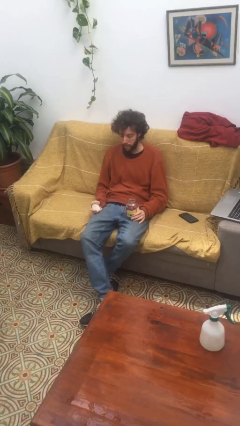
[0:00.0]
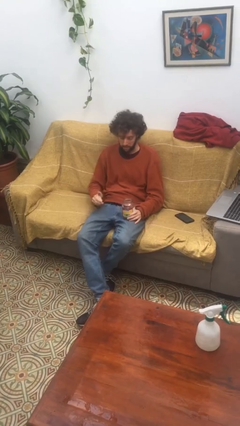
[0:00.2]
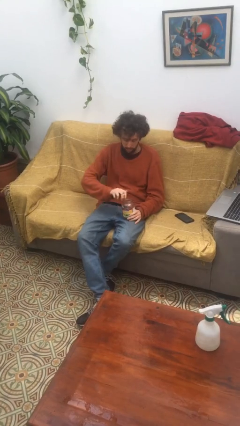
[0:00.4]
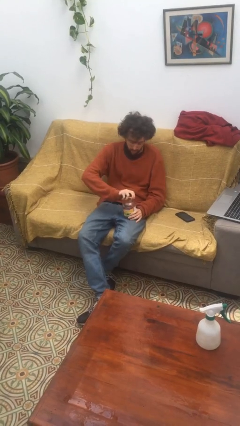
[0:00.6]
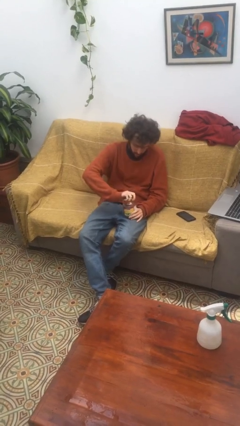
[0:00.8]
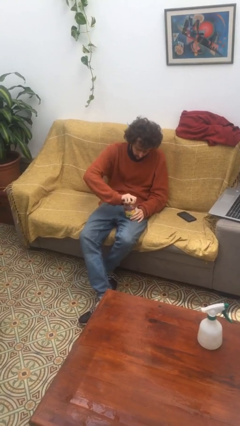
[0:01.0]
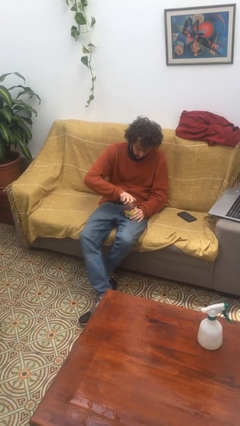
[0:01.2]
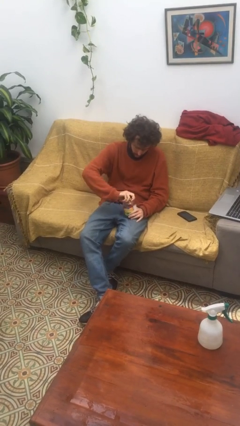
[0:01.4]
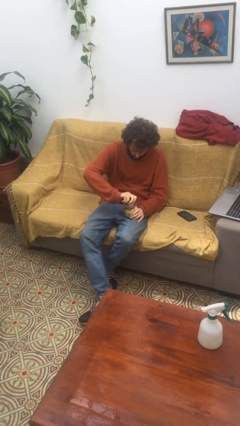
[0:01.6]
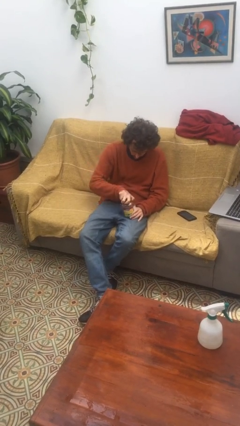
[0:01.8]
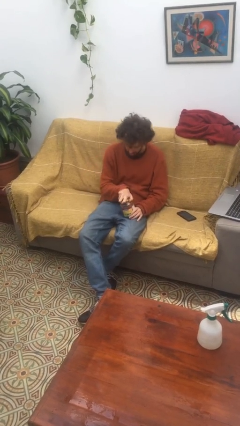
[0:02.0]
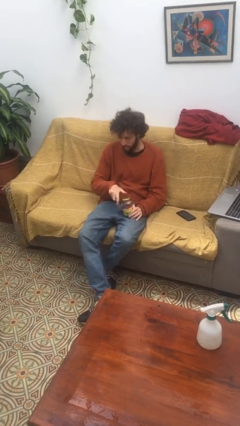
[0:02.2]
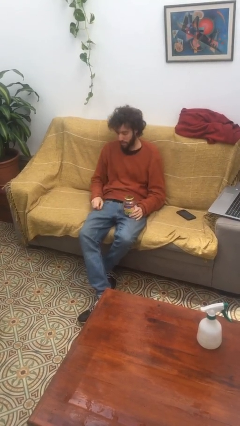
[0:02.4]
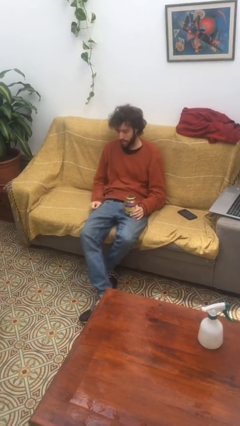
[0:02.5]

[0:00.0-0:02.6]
person closes jar

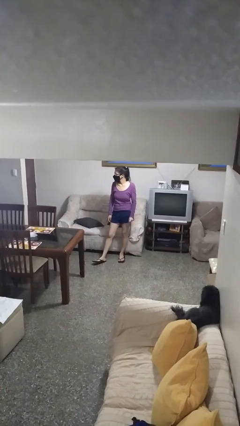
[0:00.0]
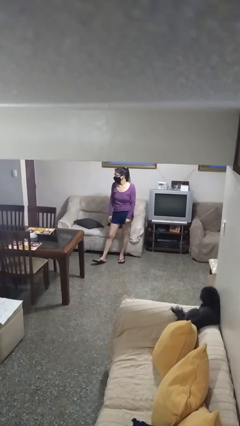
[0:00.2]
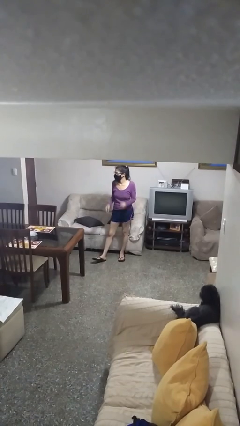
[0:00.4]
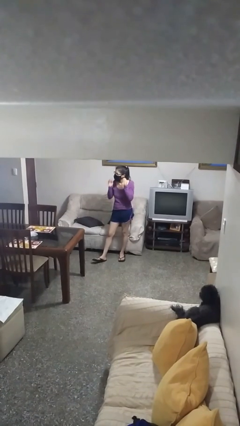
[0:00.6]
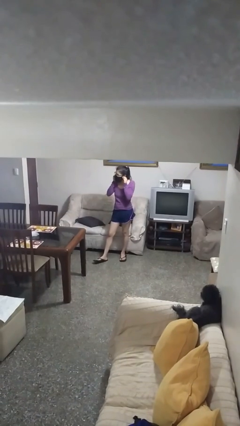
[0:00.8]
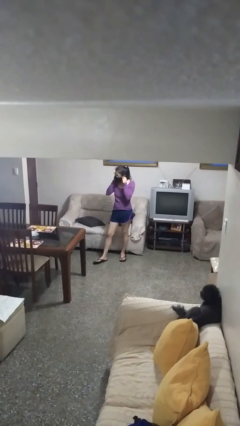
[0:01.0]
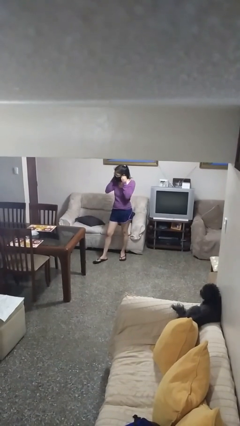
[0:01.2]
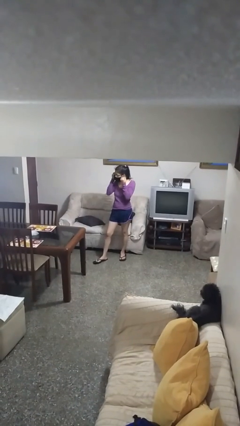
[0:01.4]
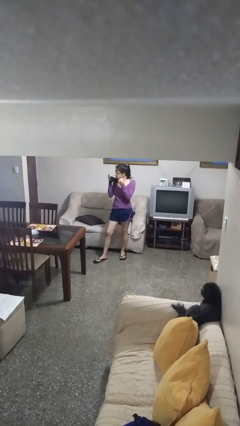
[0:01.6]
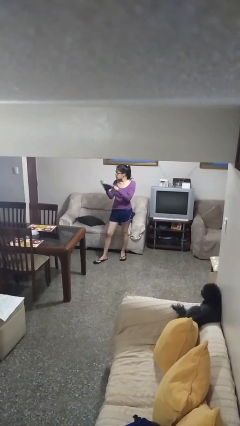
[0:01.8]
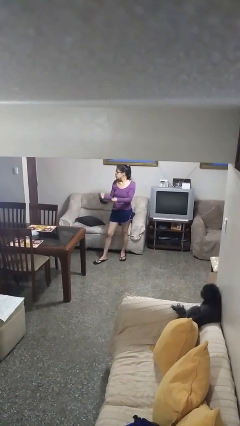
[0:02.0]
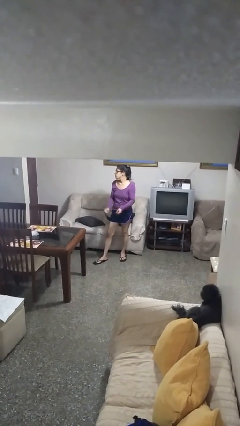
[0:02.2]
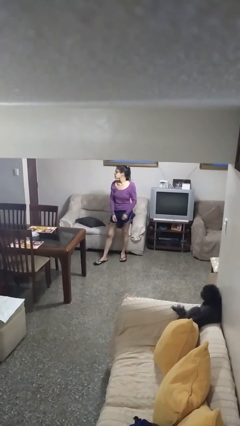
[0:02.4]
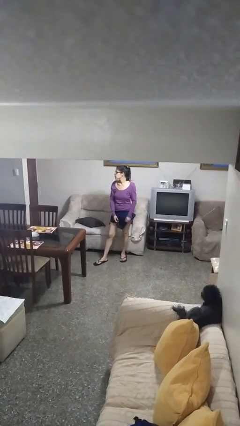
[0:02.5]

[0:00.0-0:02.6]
person takes off facemask

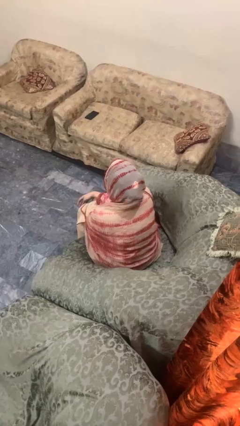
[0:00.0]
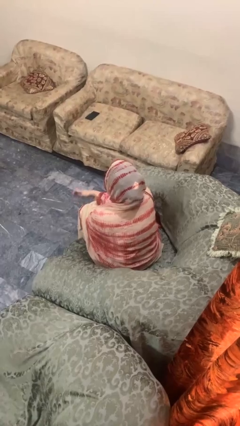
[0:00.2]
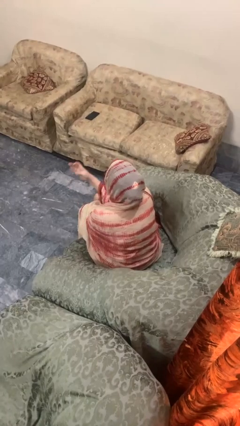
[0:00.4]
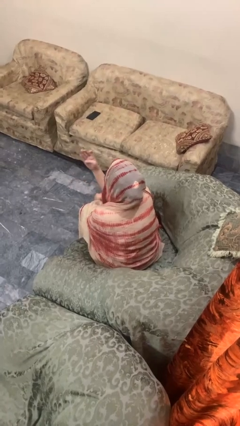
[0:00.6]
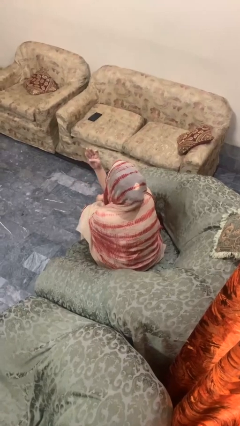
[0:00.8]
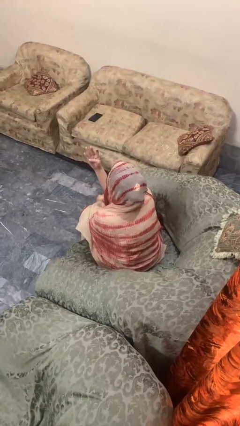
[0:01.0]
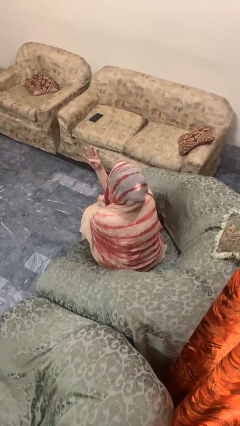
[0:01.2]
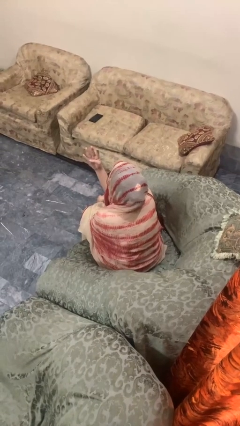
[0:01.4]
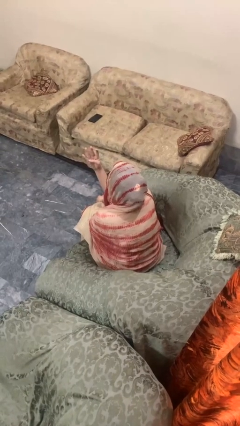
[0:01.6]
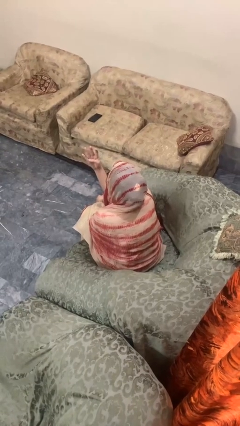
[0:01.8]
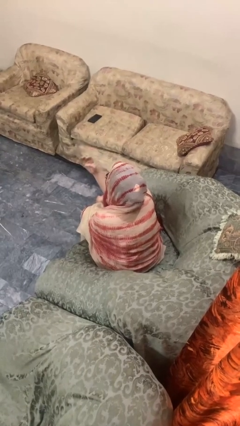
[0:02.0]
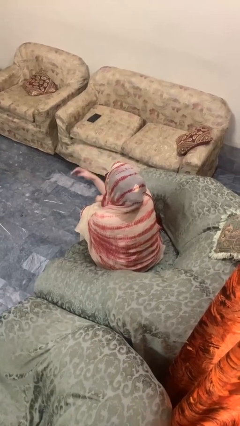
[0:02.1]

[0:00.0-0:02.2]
person gestures number four

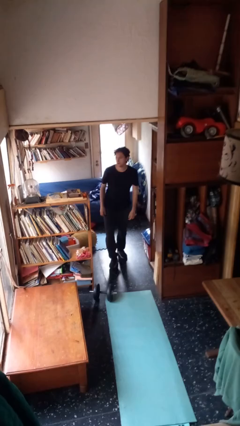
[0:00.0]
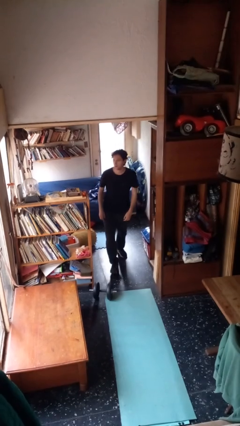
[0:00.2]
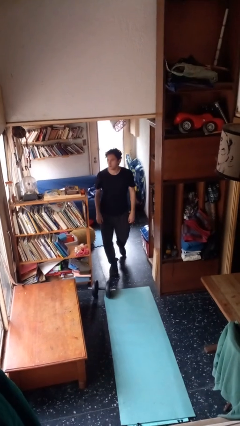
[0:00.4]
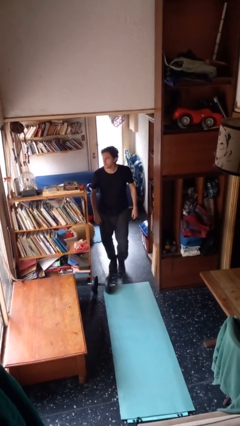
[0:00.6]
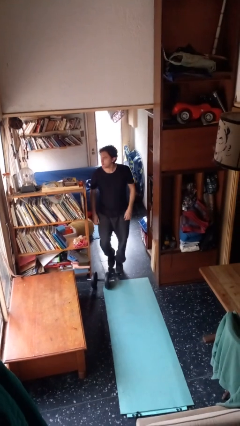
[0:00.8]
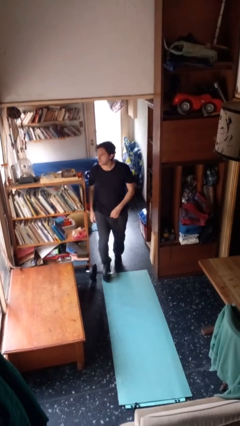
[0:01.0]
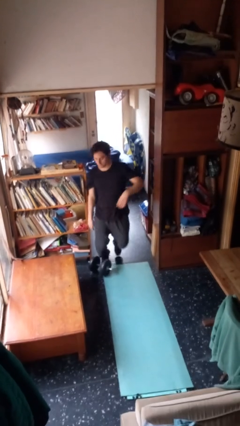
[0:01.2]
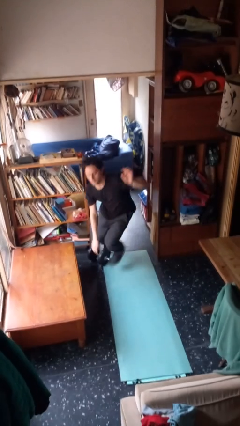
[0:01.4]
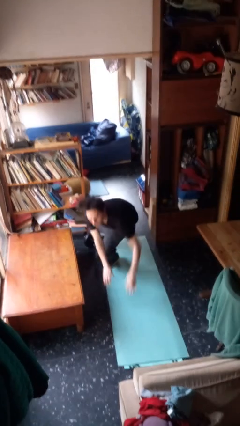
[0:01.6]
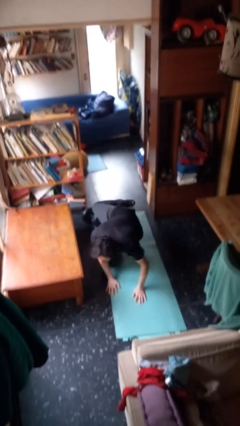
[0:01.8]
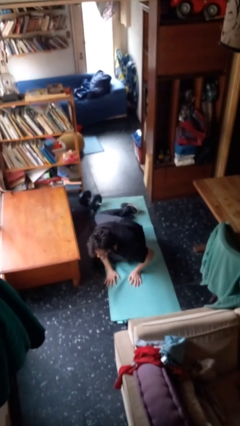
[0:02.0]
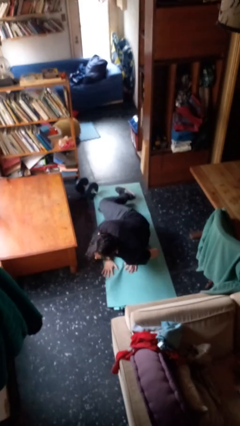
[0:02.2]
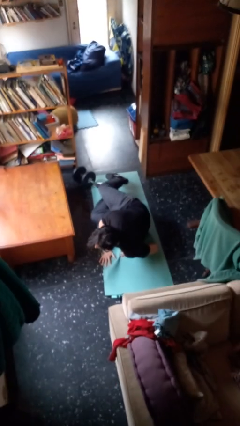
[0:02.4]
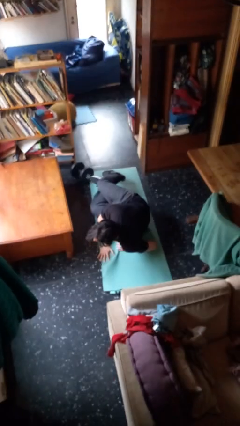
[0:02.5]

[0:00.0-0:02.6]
person trips on object on floor

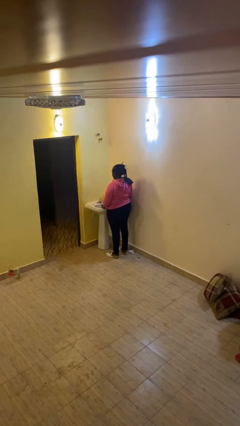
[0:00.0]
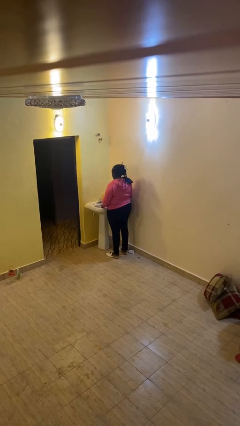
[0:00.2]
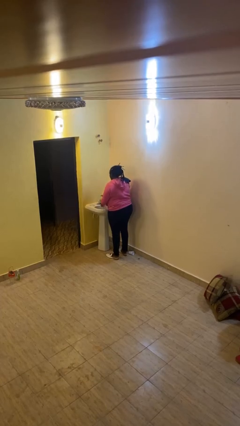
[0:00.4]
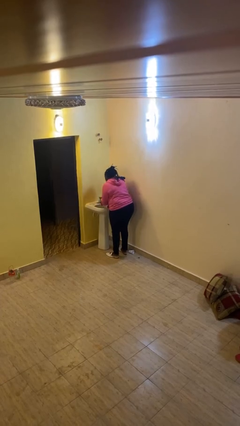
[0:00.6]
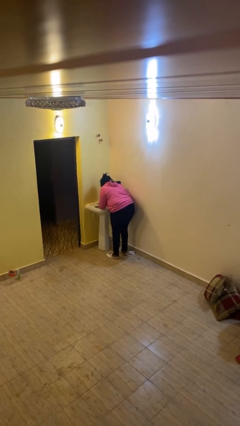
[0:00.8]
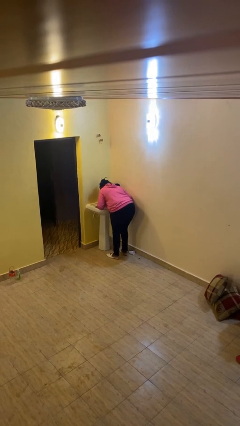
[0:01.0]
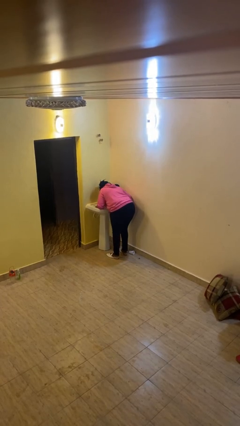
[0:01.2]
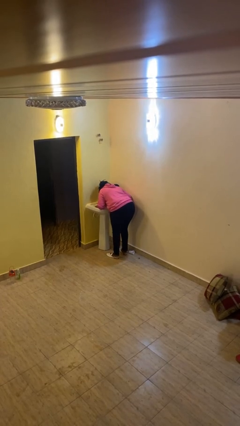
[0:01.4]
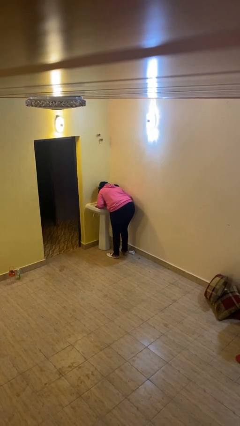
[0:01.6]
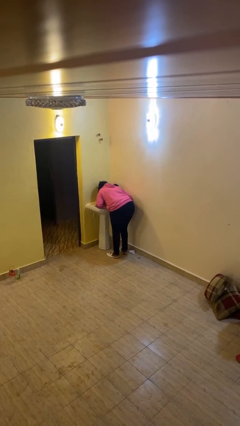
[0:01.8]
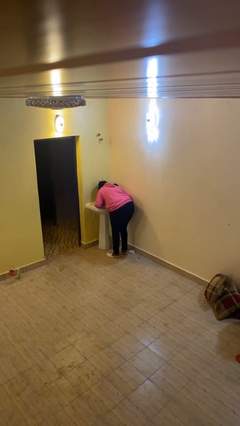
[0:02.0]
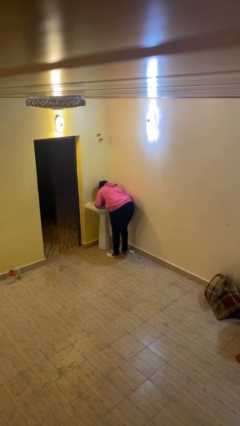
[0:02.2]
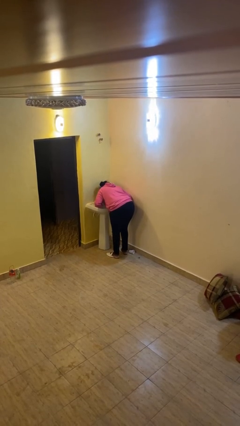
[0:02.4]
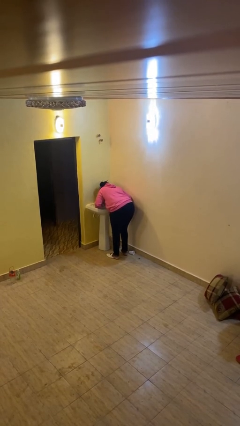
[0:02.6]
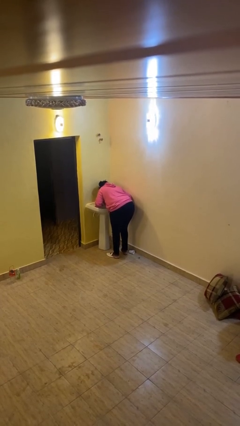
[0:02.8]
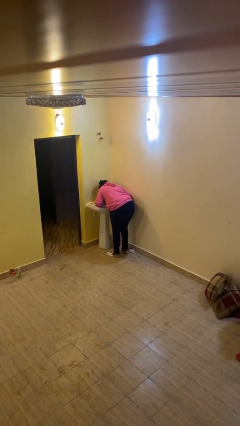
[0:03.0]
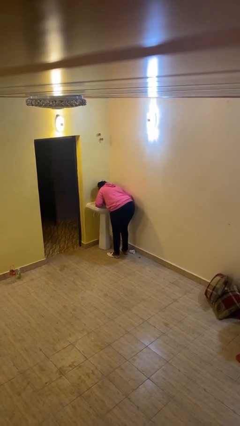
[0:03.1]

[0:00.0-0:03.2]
person washes face

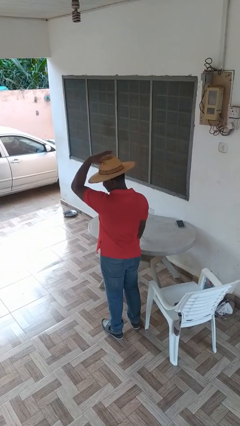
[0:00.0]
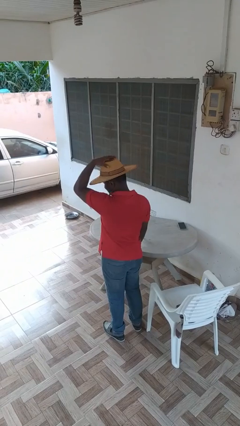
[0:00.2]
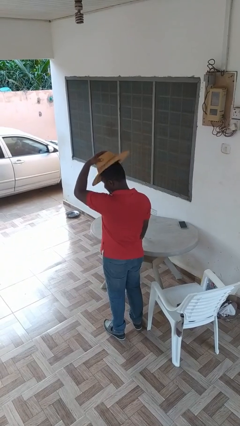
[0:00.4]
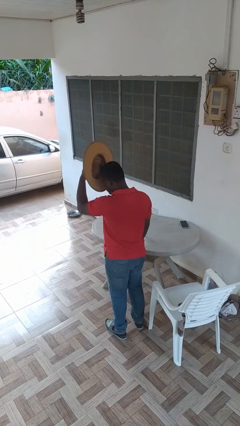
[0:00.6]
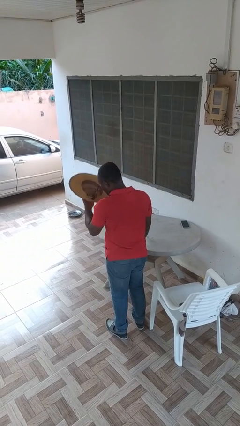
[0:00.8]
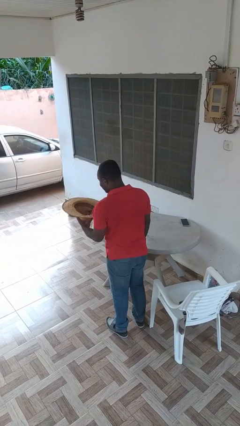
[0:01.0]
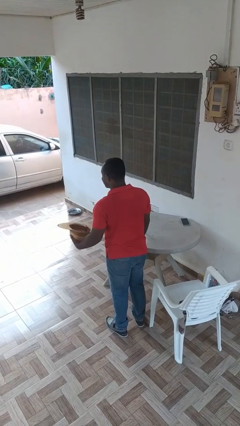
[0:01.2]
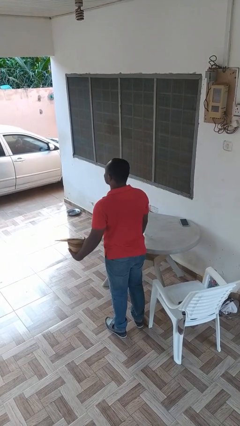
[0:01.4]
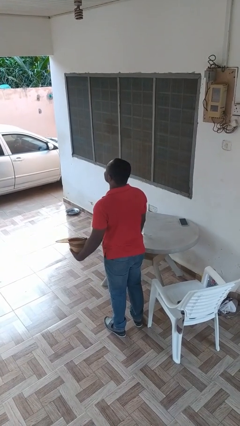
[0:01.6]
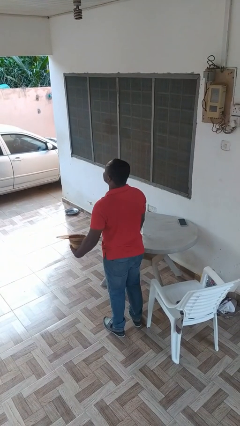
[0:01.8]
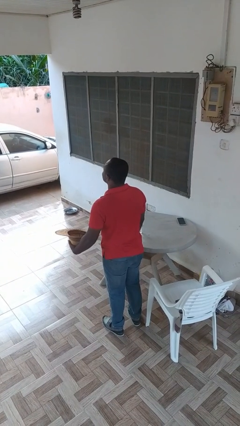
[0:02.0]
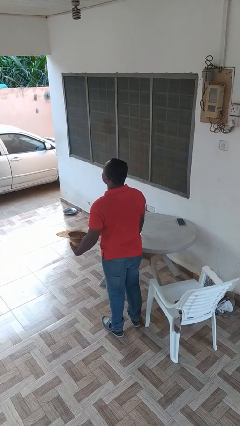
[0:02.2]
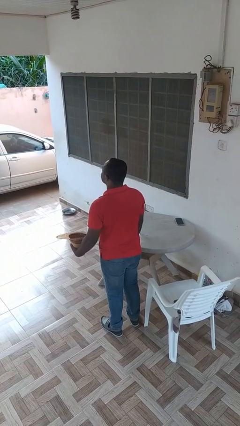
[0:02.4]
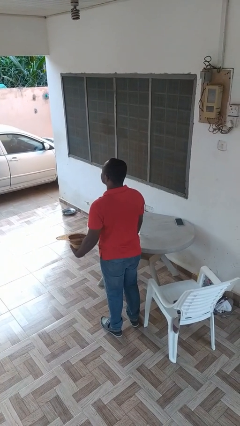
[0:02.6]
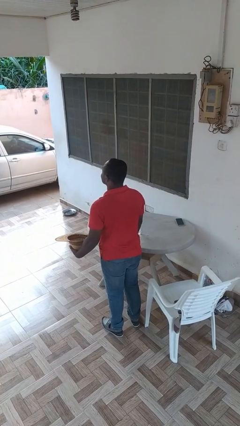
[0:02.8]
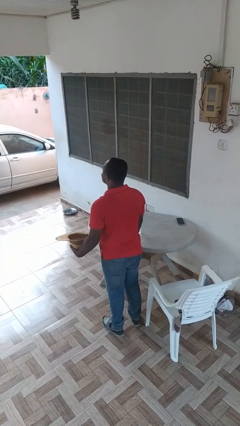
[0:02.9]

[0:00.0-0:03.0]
person takes off hat

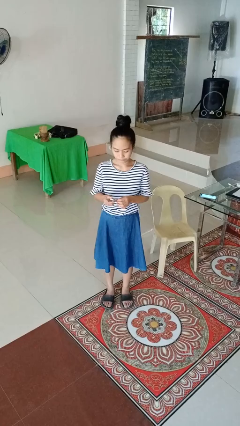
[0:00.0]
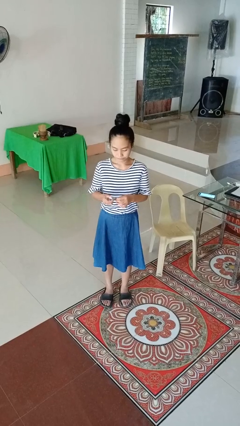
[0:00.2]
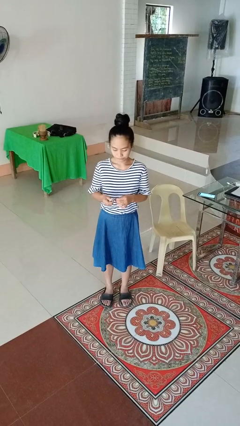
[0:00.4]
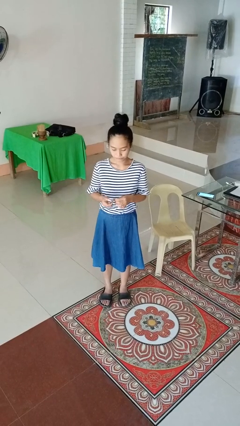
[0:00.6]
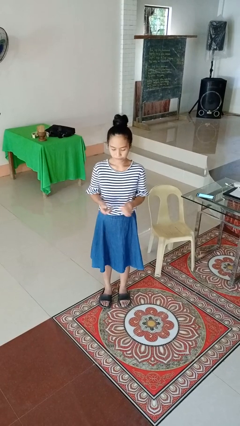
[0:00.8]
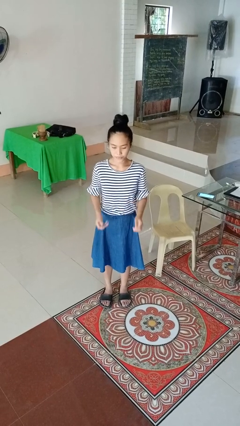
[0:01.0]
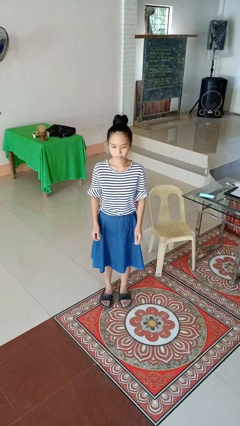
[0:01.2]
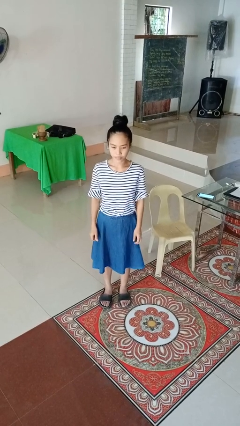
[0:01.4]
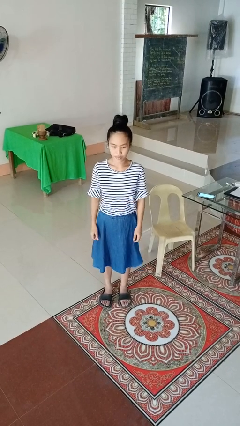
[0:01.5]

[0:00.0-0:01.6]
person clips fingernails
